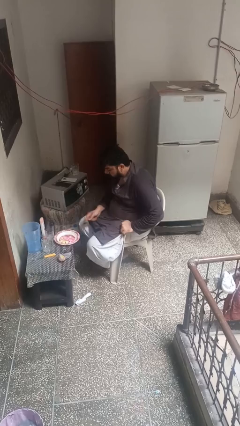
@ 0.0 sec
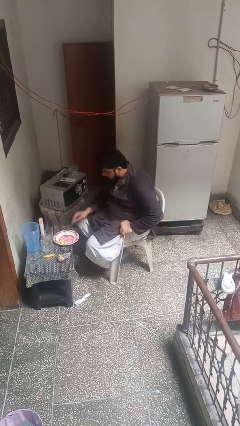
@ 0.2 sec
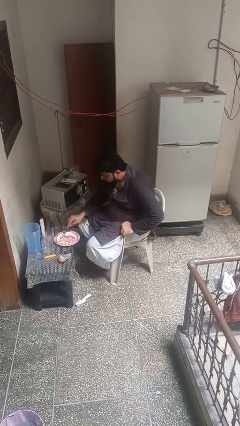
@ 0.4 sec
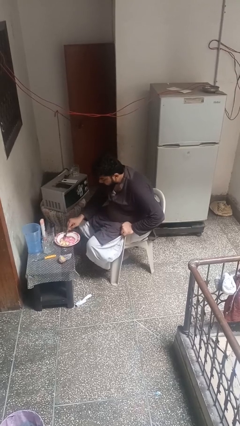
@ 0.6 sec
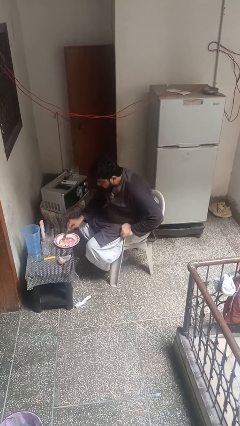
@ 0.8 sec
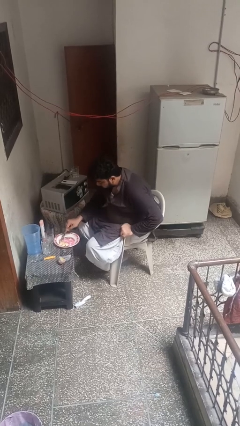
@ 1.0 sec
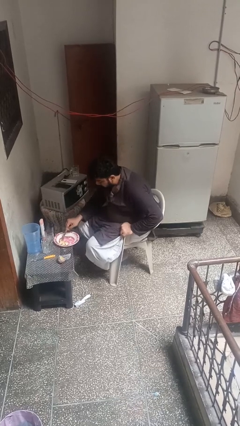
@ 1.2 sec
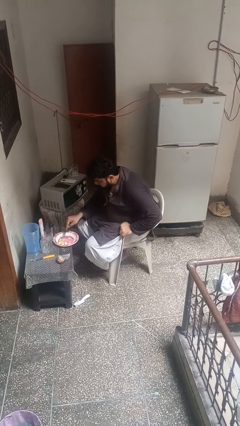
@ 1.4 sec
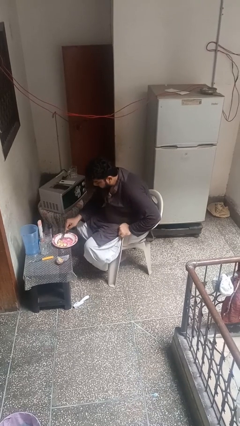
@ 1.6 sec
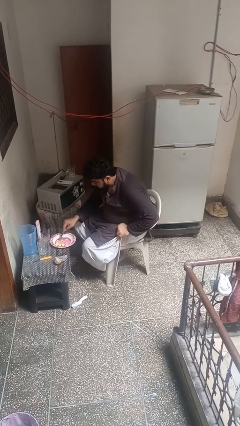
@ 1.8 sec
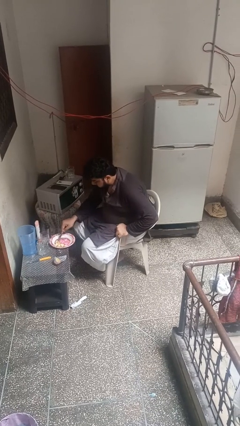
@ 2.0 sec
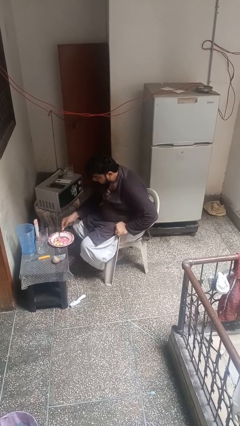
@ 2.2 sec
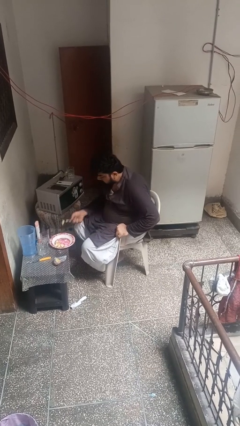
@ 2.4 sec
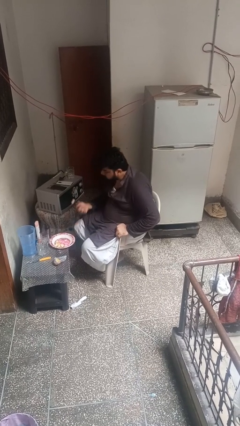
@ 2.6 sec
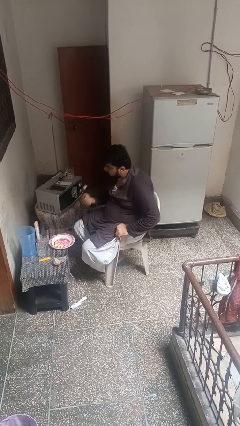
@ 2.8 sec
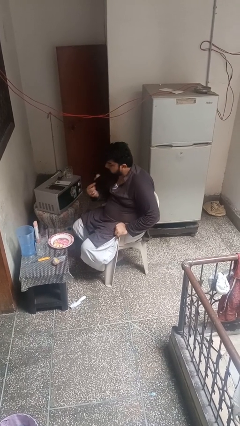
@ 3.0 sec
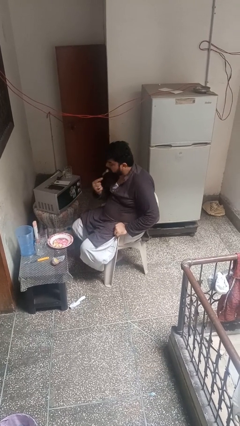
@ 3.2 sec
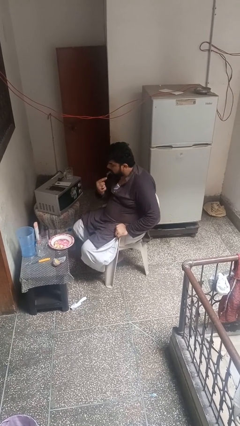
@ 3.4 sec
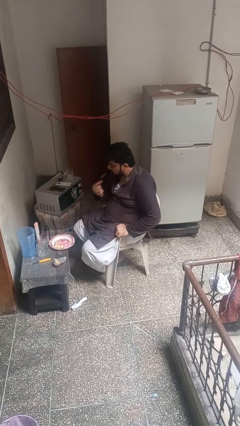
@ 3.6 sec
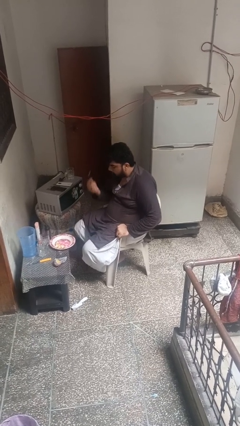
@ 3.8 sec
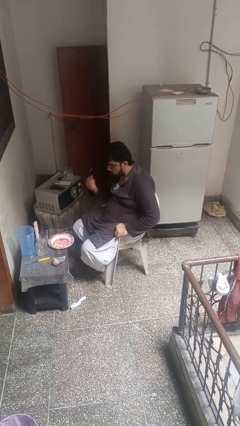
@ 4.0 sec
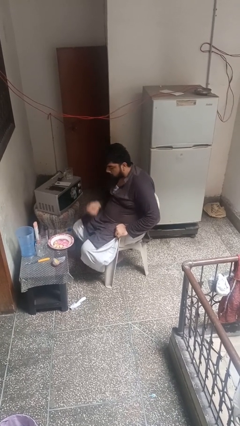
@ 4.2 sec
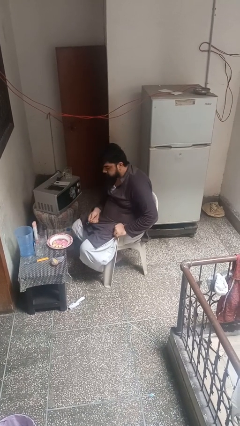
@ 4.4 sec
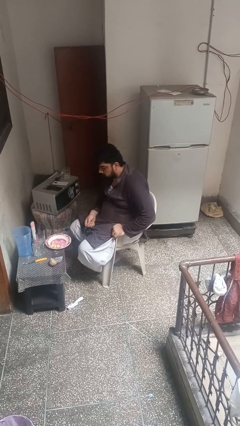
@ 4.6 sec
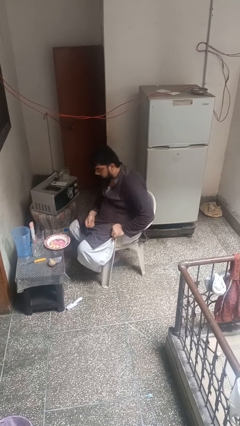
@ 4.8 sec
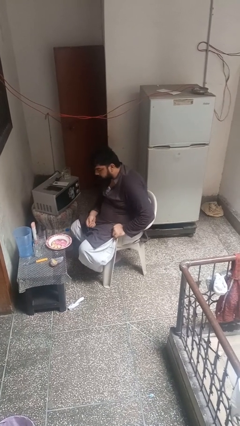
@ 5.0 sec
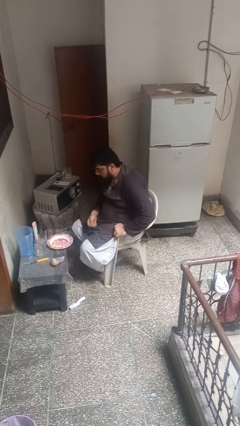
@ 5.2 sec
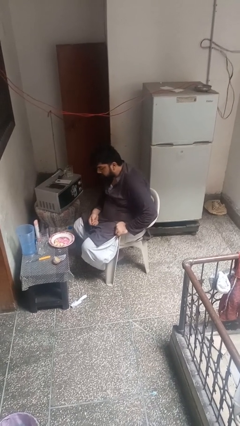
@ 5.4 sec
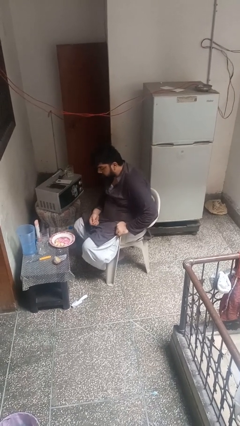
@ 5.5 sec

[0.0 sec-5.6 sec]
person eats with utensil

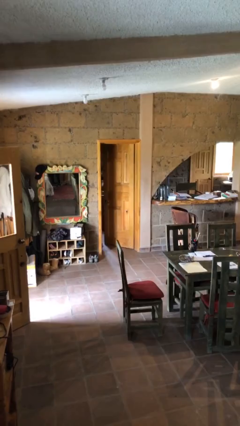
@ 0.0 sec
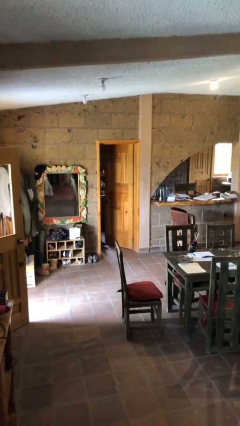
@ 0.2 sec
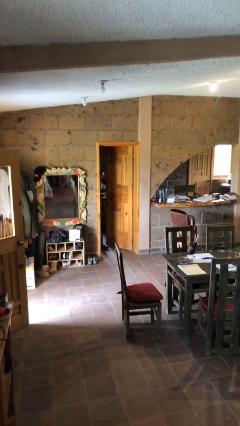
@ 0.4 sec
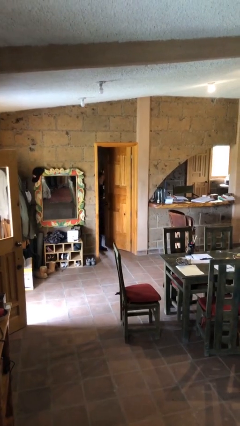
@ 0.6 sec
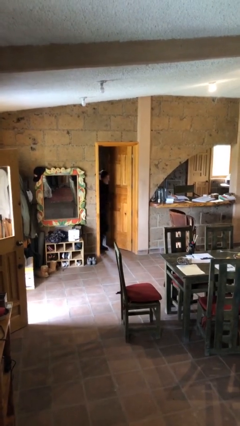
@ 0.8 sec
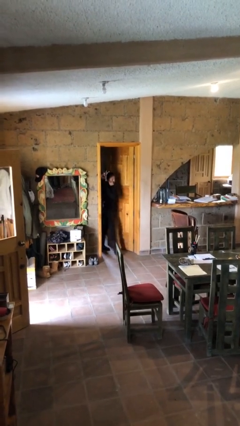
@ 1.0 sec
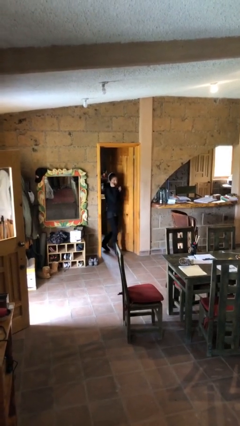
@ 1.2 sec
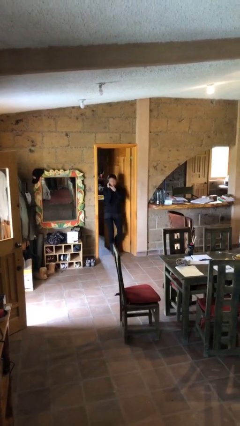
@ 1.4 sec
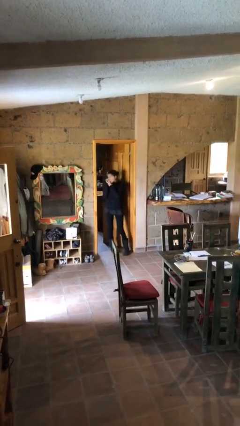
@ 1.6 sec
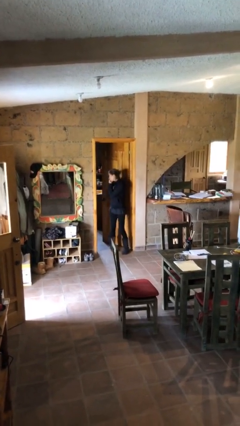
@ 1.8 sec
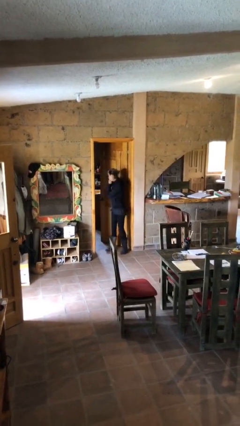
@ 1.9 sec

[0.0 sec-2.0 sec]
person enters scene through structure

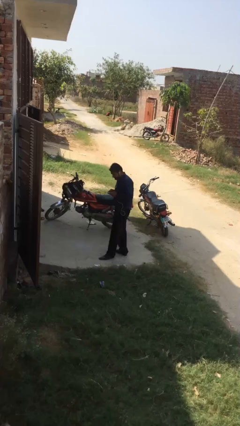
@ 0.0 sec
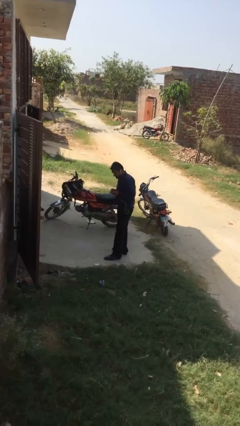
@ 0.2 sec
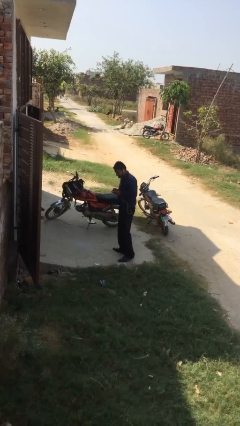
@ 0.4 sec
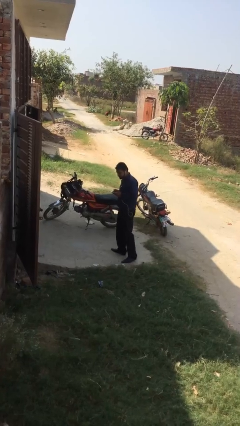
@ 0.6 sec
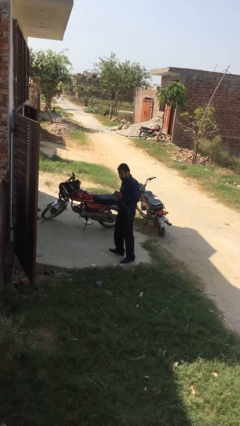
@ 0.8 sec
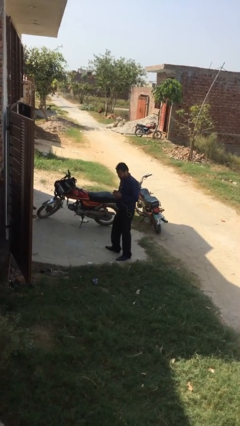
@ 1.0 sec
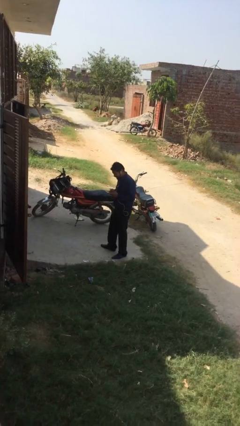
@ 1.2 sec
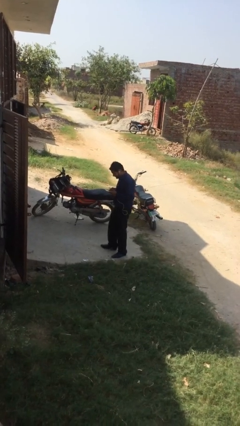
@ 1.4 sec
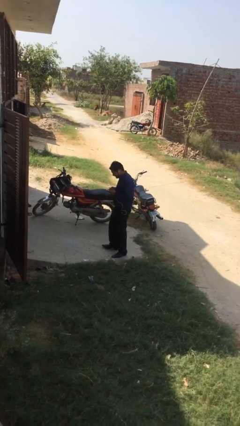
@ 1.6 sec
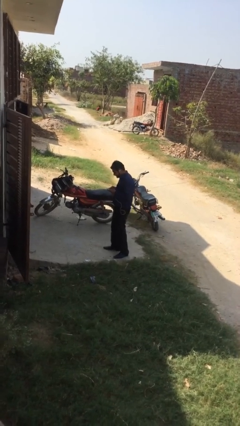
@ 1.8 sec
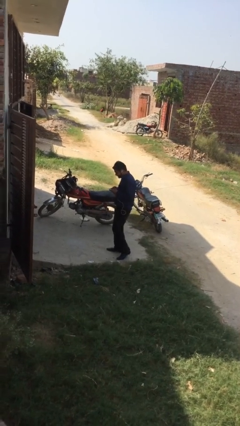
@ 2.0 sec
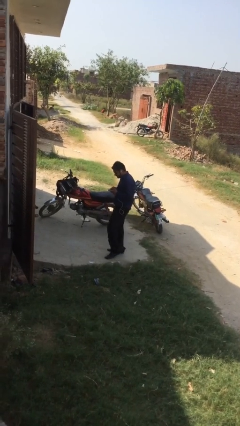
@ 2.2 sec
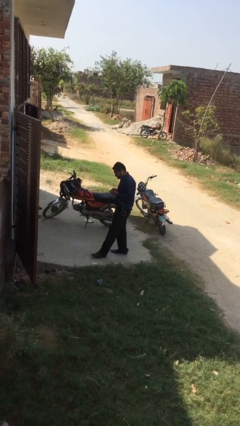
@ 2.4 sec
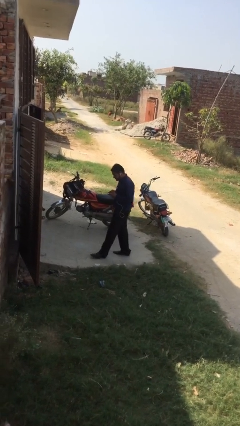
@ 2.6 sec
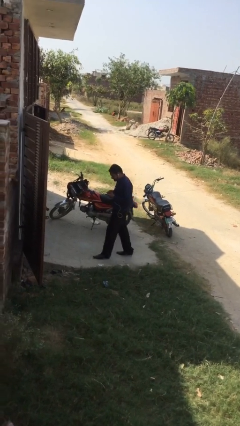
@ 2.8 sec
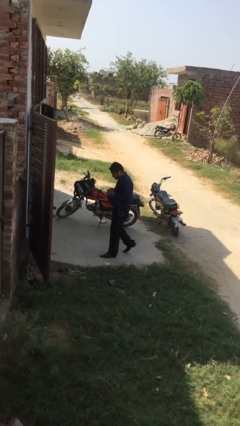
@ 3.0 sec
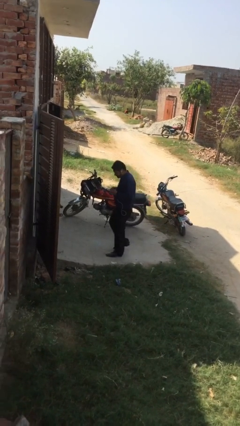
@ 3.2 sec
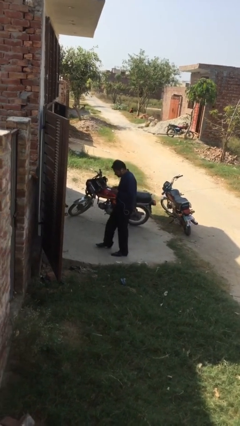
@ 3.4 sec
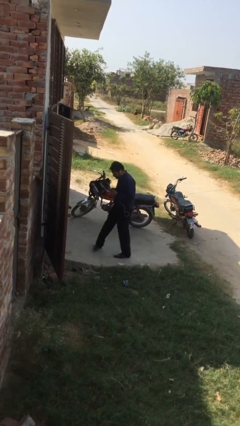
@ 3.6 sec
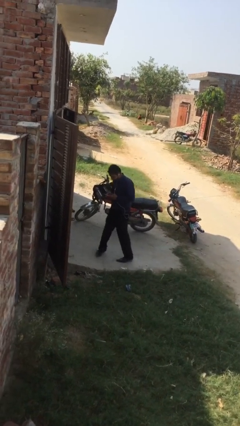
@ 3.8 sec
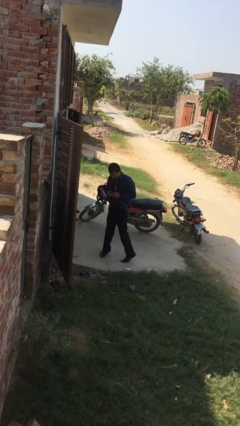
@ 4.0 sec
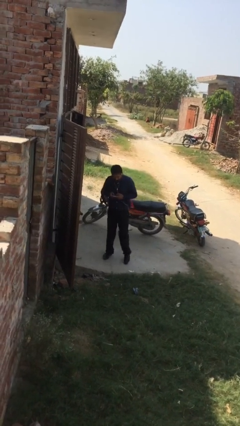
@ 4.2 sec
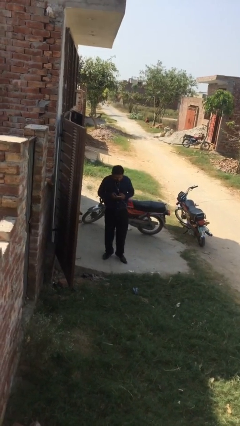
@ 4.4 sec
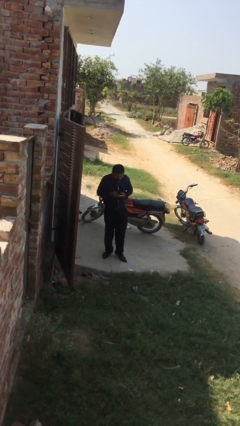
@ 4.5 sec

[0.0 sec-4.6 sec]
person texts on phone

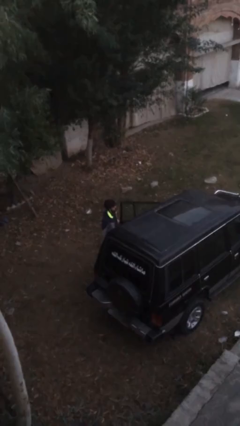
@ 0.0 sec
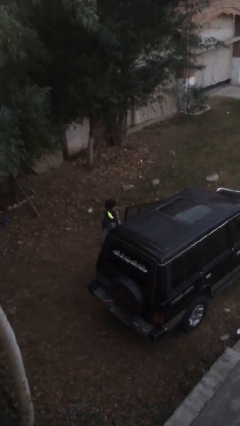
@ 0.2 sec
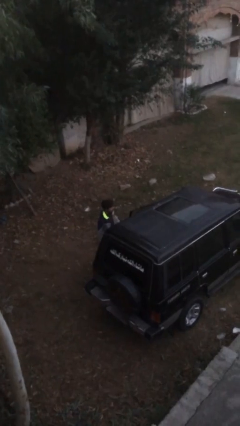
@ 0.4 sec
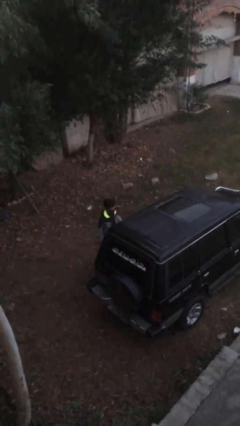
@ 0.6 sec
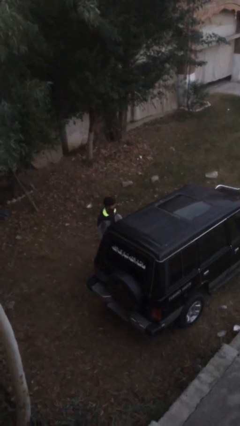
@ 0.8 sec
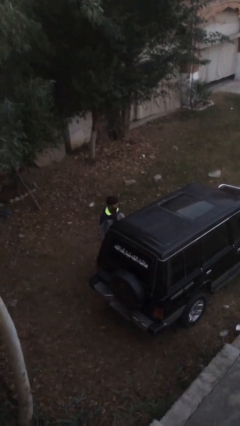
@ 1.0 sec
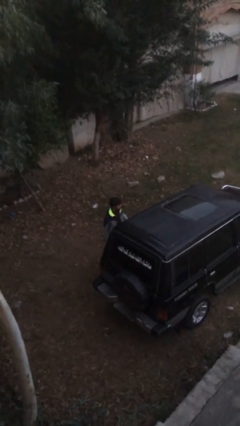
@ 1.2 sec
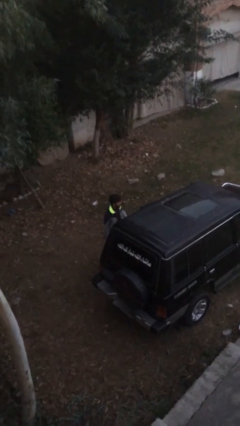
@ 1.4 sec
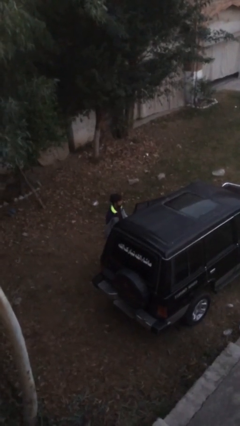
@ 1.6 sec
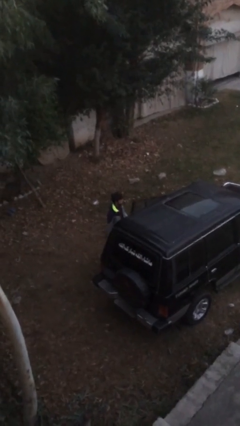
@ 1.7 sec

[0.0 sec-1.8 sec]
person closes car door

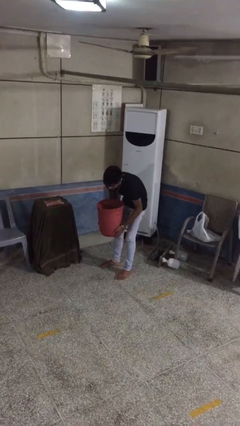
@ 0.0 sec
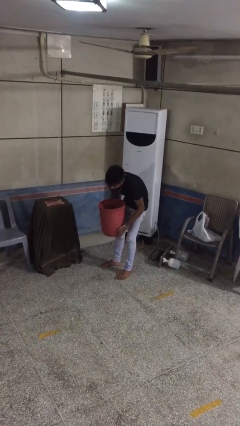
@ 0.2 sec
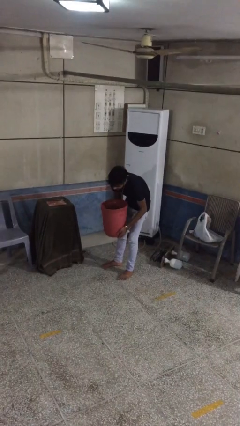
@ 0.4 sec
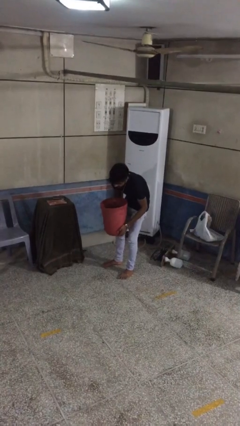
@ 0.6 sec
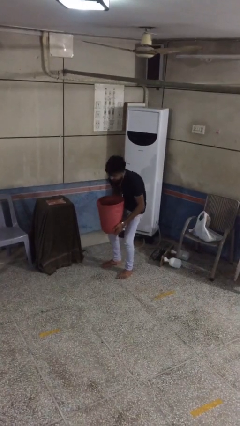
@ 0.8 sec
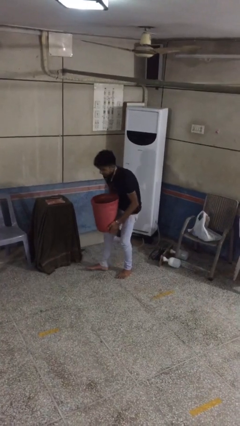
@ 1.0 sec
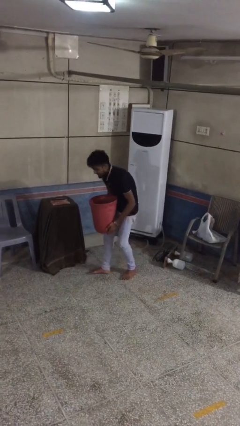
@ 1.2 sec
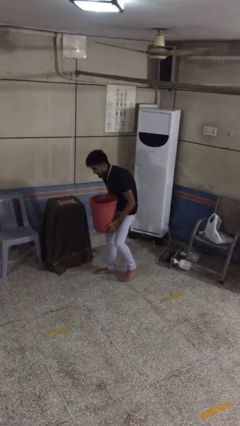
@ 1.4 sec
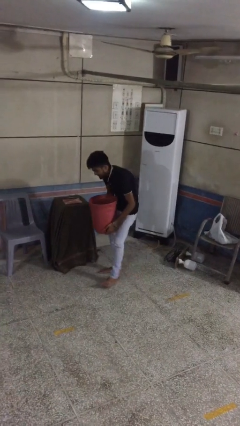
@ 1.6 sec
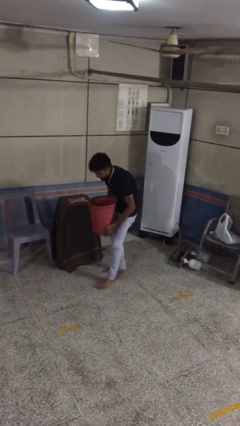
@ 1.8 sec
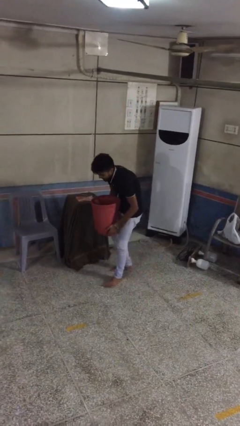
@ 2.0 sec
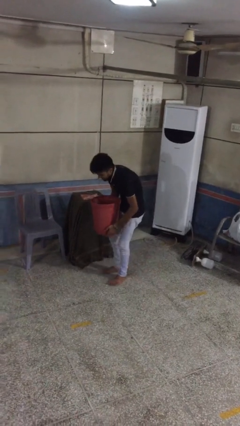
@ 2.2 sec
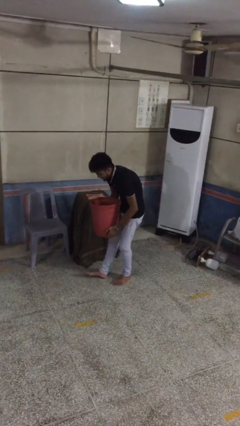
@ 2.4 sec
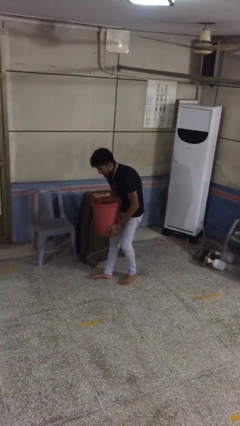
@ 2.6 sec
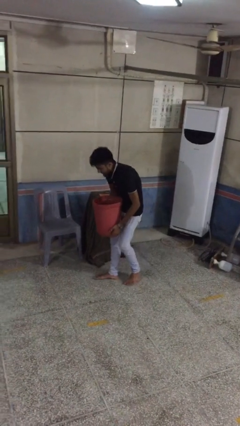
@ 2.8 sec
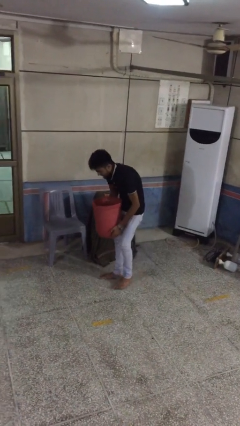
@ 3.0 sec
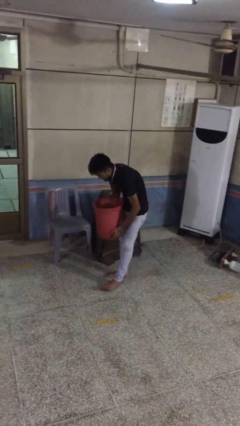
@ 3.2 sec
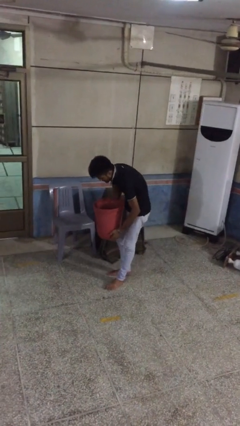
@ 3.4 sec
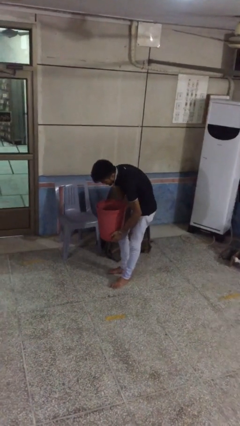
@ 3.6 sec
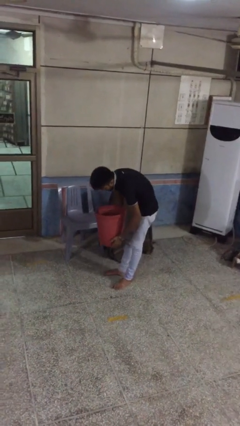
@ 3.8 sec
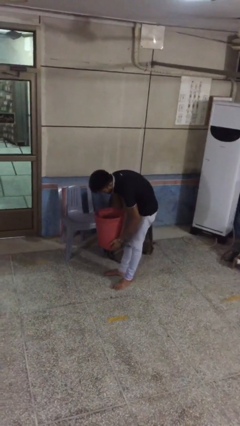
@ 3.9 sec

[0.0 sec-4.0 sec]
person carries heavy object
